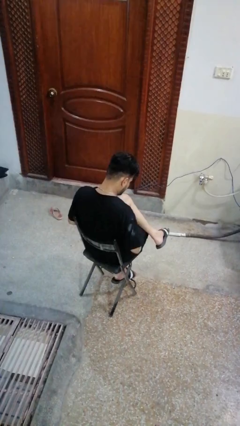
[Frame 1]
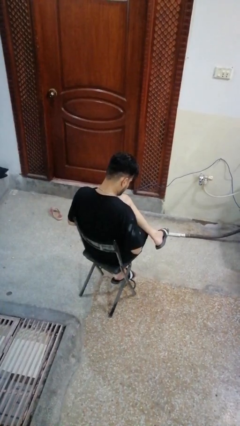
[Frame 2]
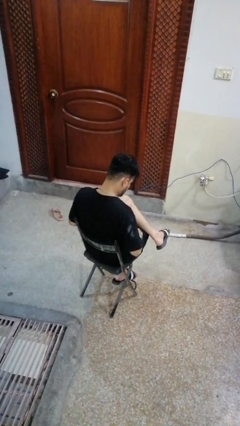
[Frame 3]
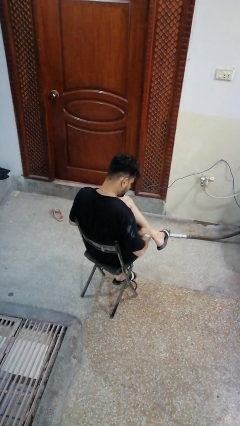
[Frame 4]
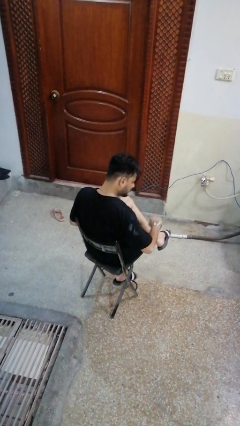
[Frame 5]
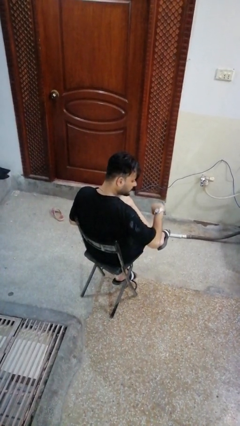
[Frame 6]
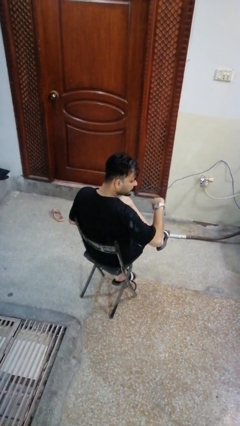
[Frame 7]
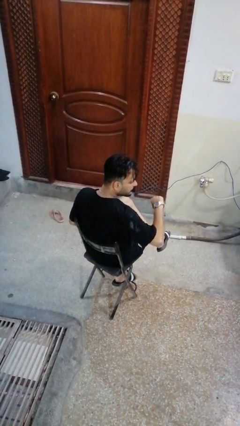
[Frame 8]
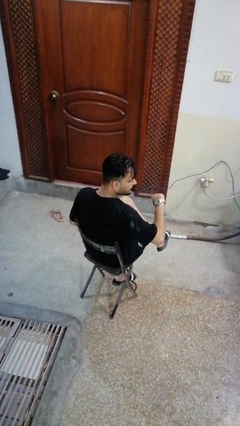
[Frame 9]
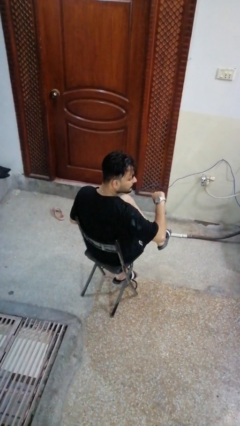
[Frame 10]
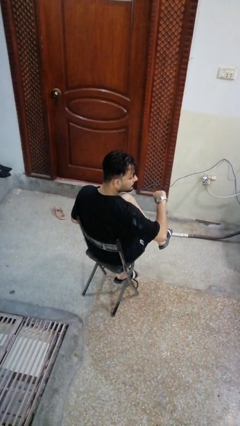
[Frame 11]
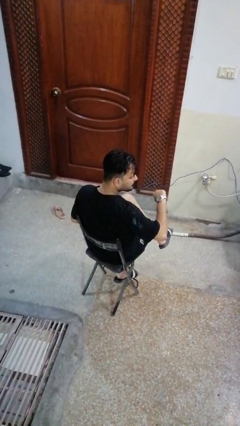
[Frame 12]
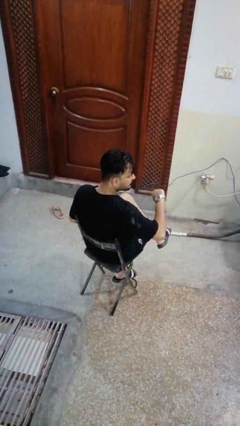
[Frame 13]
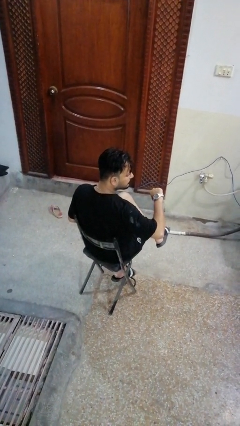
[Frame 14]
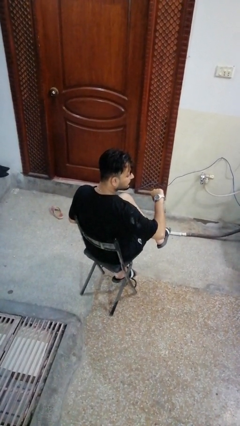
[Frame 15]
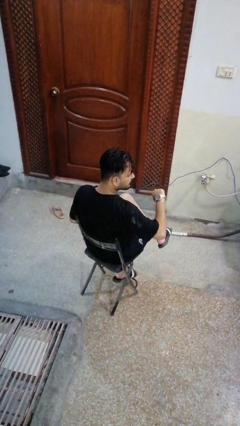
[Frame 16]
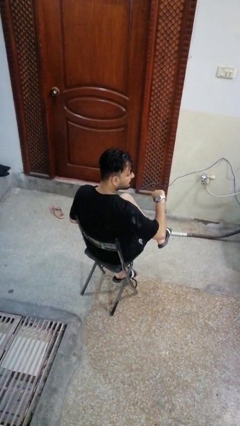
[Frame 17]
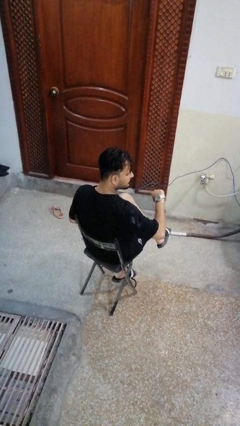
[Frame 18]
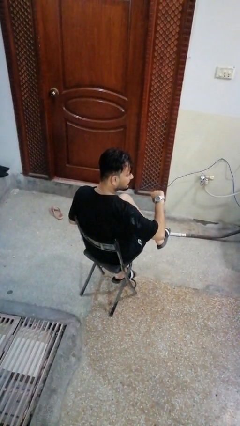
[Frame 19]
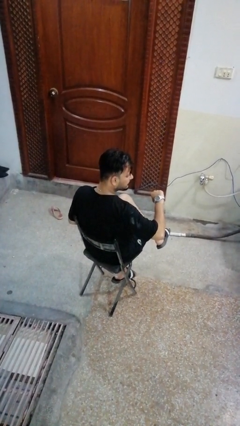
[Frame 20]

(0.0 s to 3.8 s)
person looks at wristwatch

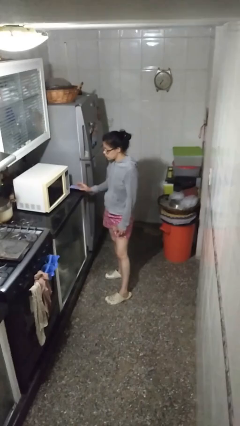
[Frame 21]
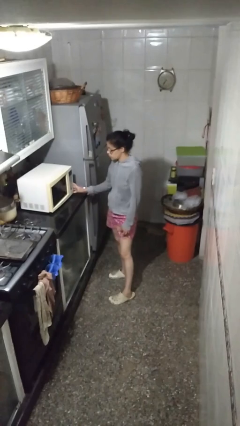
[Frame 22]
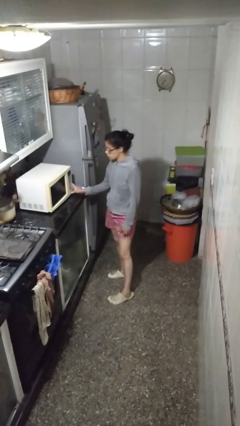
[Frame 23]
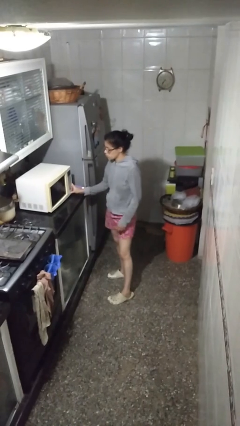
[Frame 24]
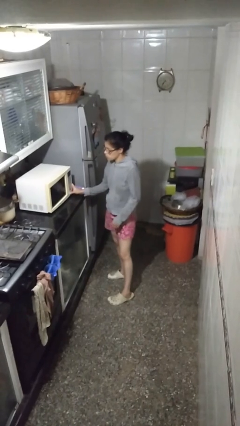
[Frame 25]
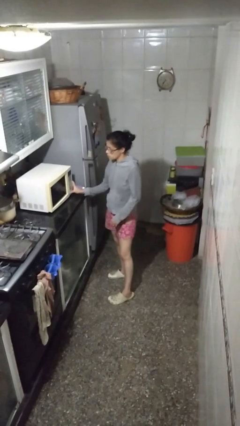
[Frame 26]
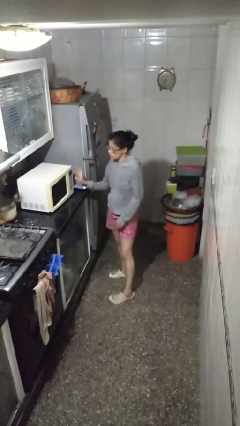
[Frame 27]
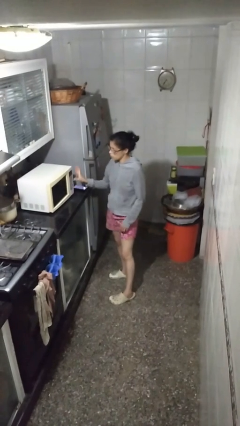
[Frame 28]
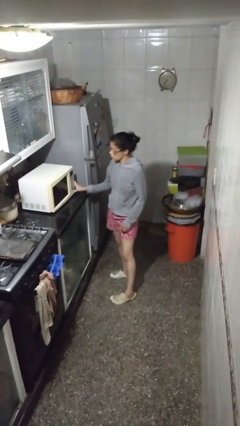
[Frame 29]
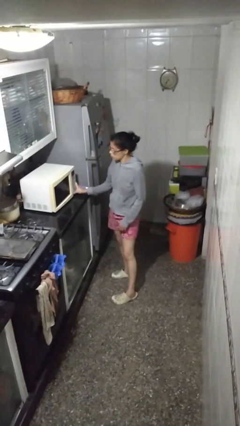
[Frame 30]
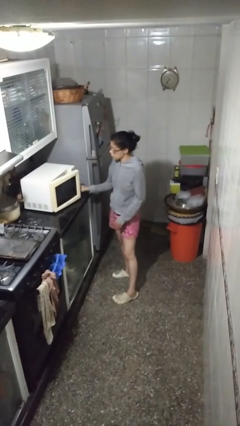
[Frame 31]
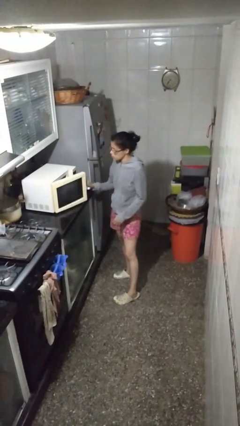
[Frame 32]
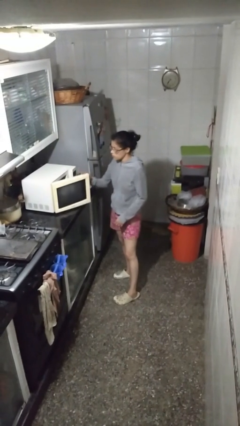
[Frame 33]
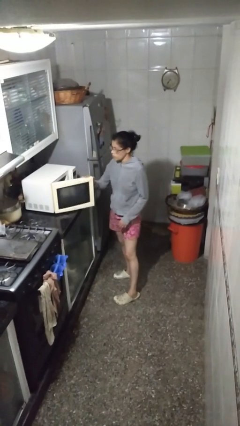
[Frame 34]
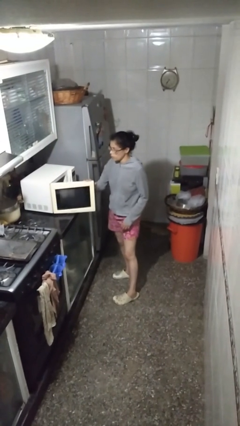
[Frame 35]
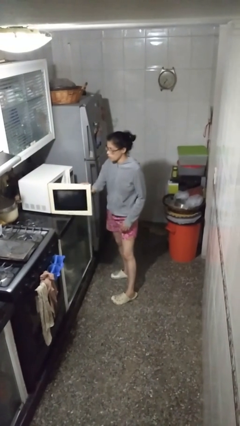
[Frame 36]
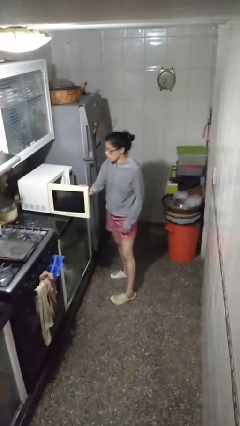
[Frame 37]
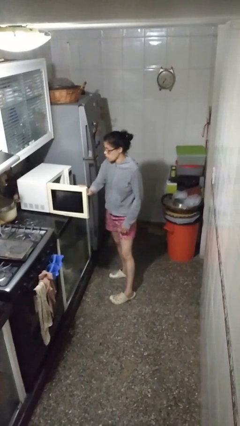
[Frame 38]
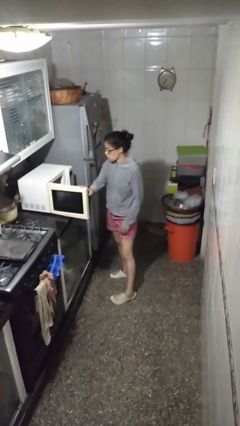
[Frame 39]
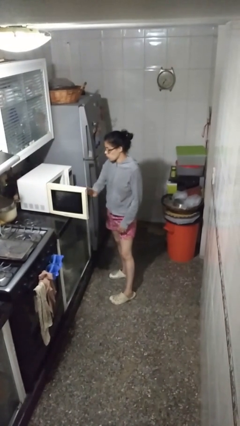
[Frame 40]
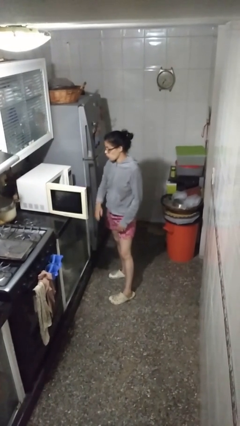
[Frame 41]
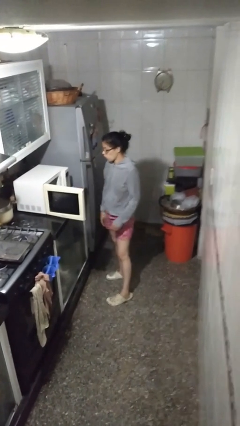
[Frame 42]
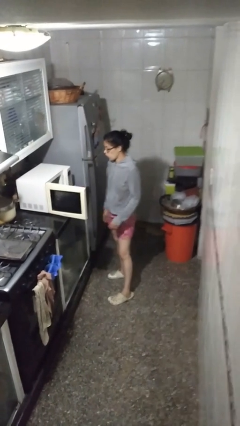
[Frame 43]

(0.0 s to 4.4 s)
person opens microwave

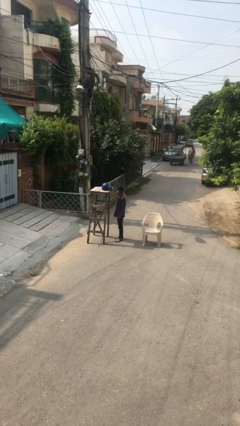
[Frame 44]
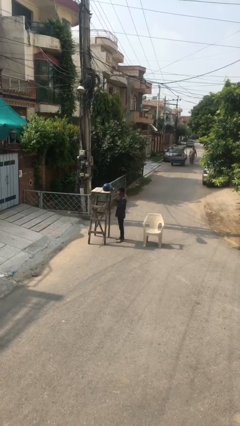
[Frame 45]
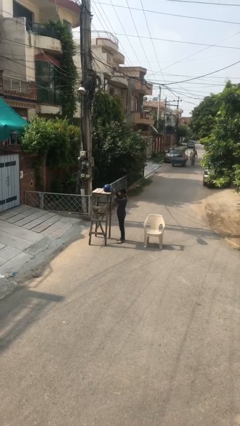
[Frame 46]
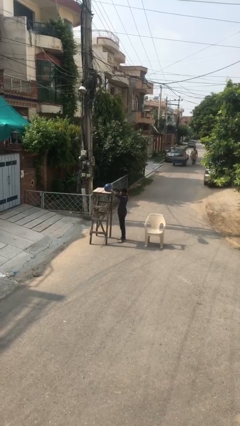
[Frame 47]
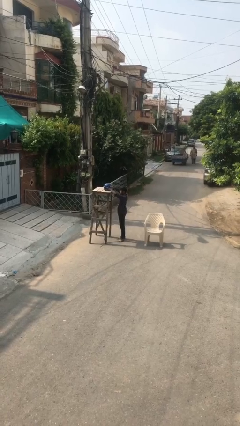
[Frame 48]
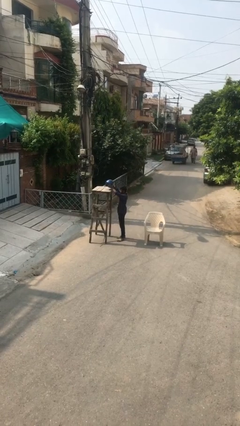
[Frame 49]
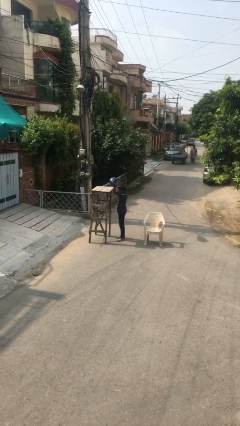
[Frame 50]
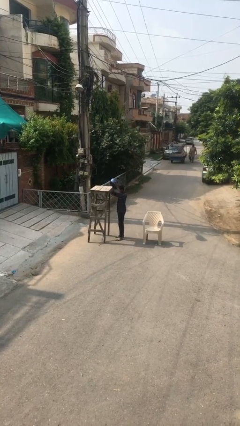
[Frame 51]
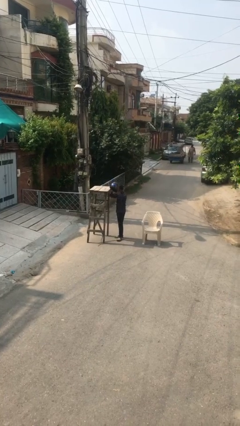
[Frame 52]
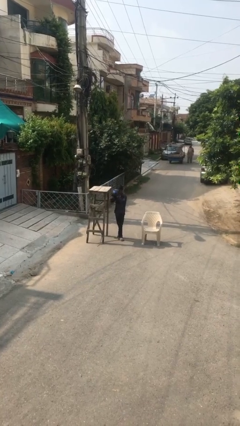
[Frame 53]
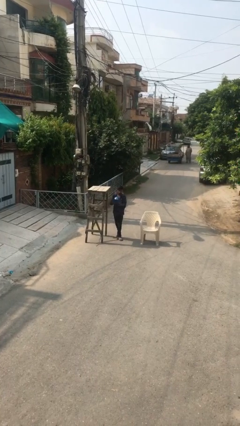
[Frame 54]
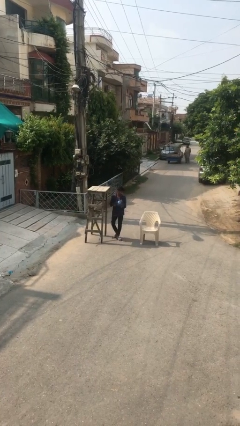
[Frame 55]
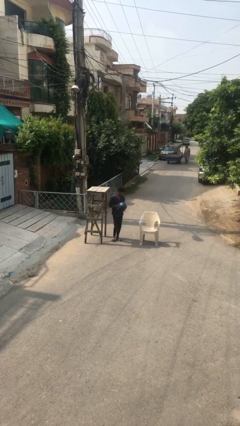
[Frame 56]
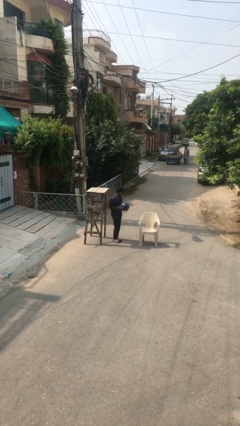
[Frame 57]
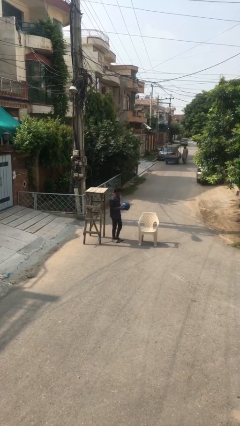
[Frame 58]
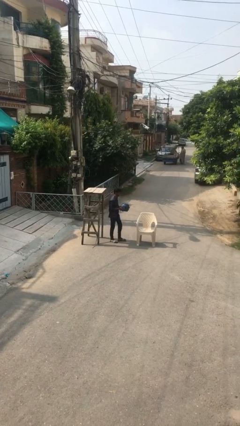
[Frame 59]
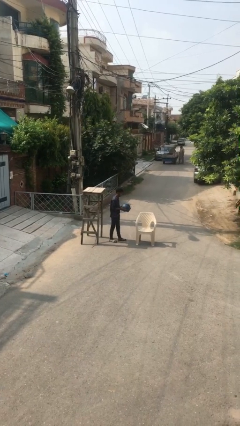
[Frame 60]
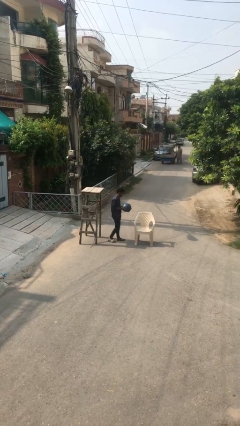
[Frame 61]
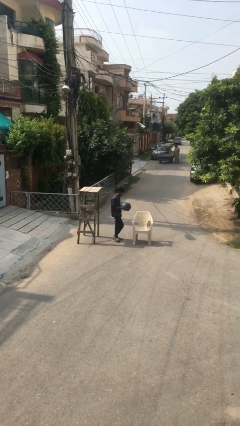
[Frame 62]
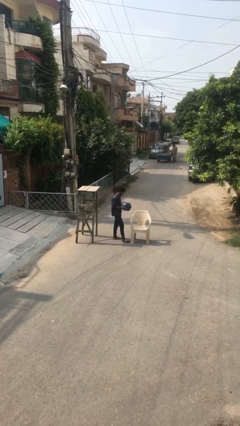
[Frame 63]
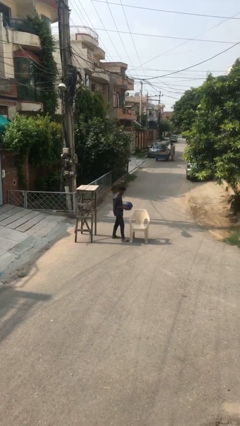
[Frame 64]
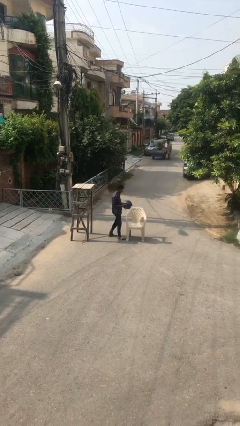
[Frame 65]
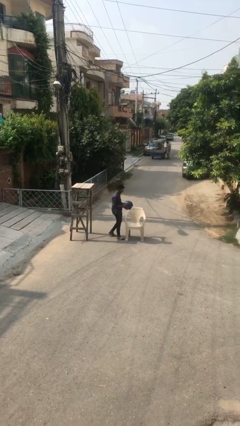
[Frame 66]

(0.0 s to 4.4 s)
person picks up object from shelf

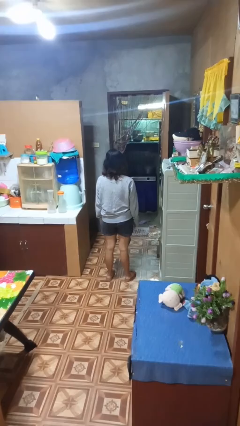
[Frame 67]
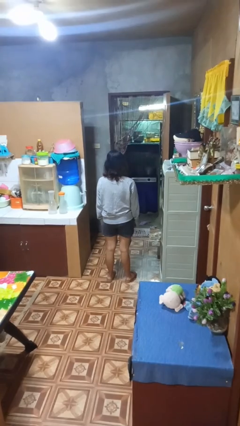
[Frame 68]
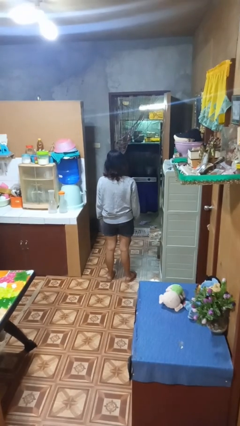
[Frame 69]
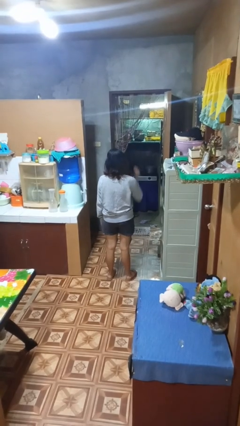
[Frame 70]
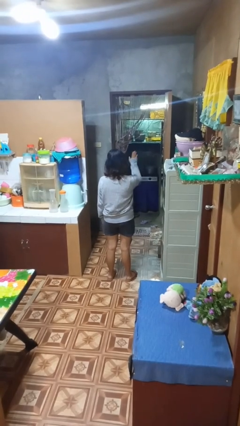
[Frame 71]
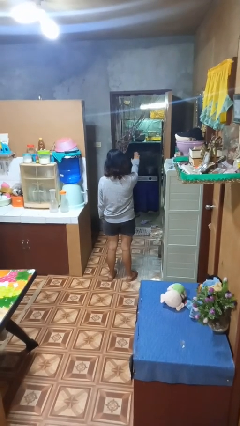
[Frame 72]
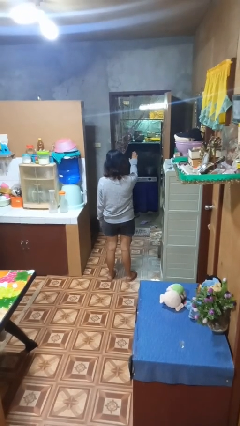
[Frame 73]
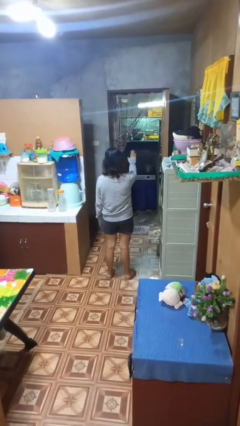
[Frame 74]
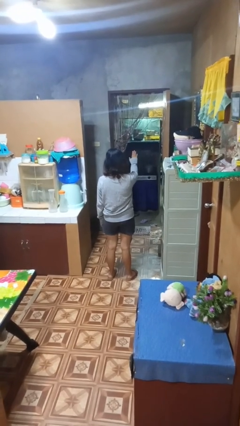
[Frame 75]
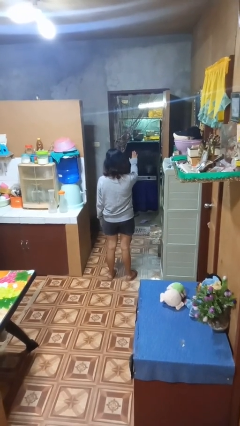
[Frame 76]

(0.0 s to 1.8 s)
person gestures stop

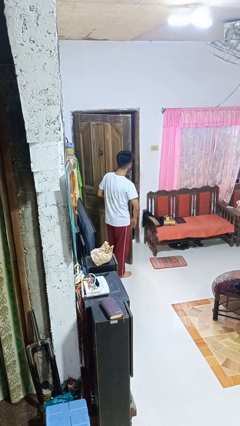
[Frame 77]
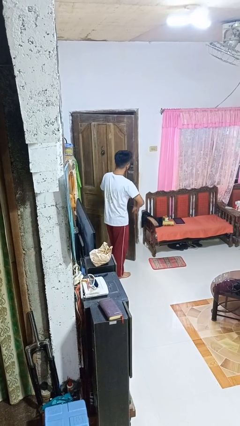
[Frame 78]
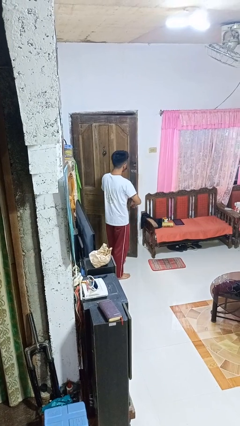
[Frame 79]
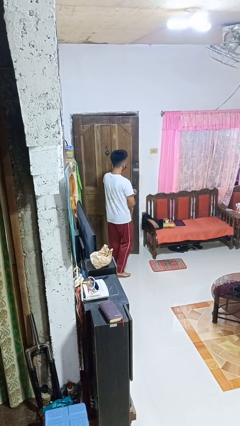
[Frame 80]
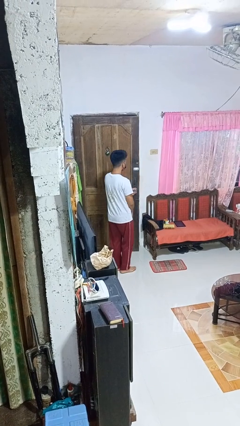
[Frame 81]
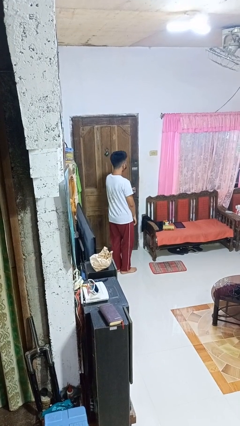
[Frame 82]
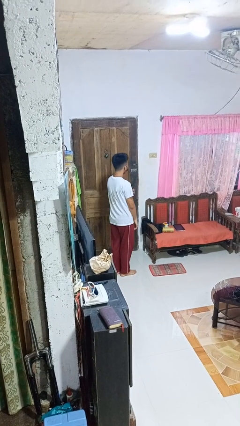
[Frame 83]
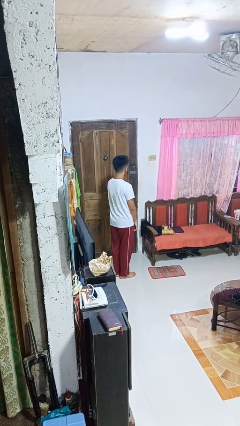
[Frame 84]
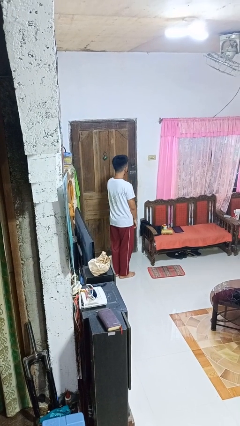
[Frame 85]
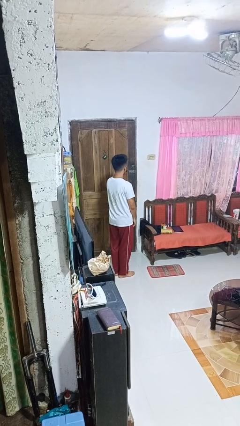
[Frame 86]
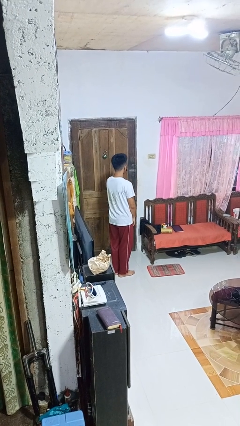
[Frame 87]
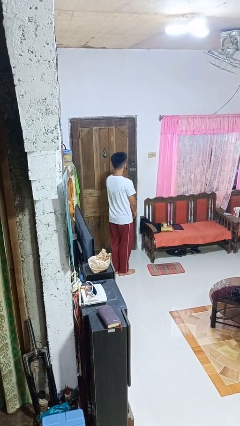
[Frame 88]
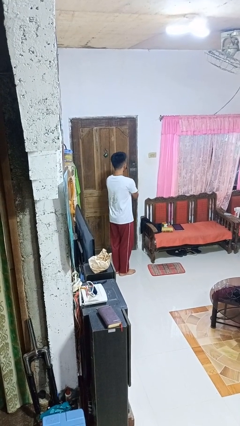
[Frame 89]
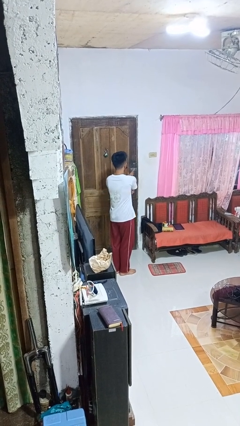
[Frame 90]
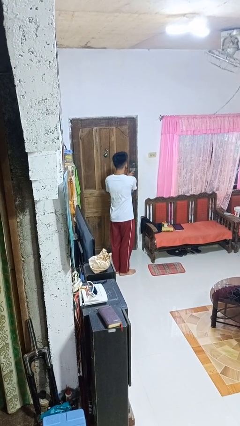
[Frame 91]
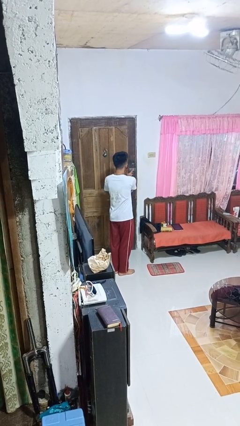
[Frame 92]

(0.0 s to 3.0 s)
person closes facility door
